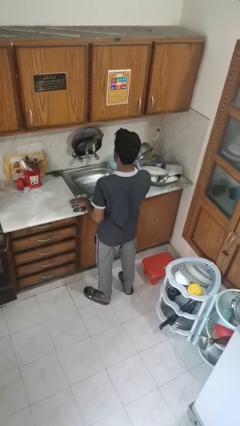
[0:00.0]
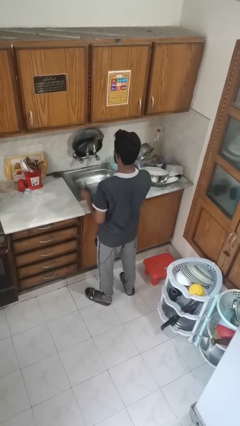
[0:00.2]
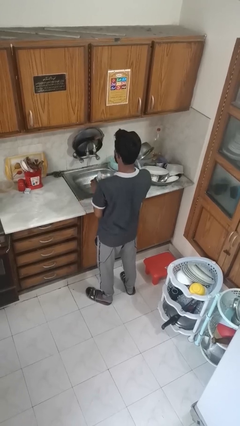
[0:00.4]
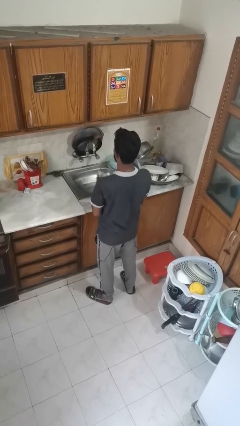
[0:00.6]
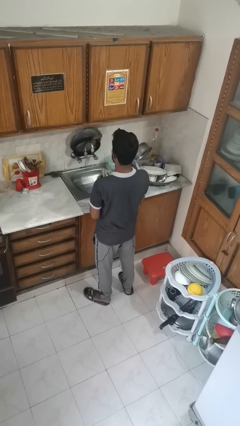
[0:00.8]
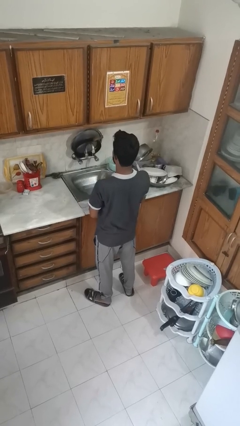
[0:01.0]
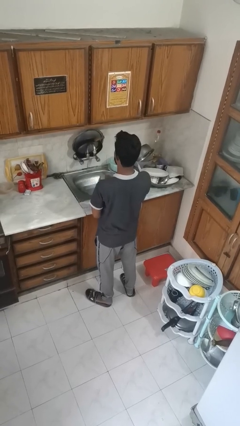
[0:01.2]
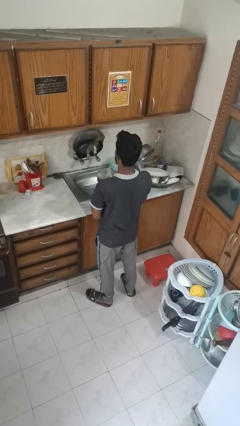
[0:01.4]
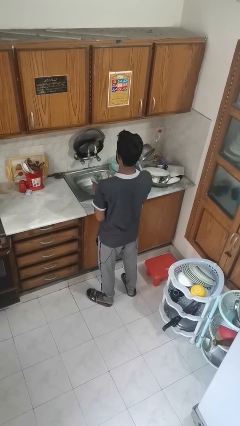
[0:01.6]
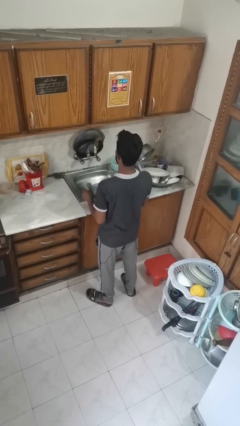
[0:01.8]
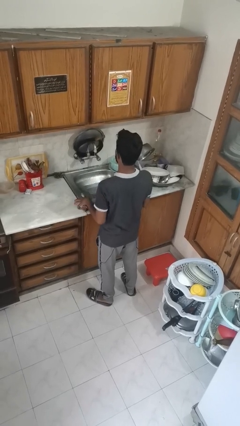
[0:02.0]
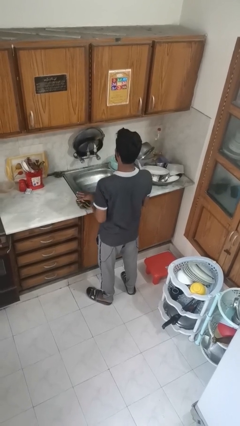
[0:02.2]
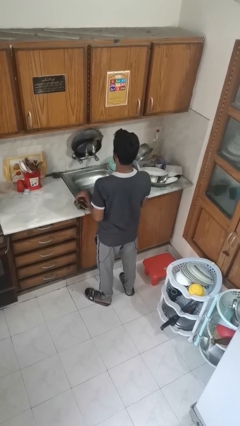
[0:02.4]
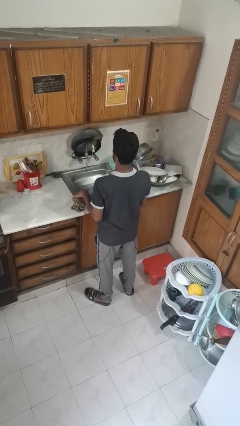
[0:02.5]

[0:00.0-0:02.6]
person dries hands with towel

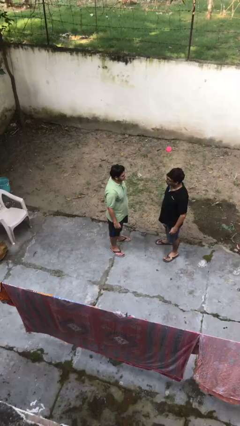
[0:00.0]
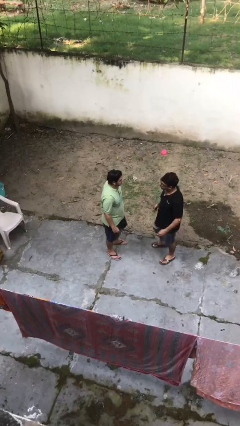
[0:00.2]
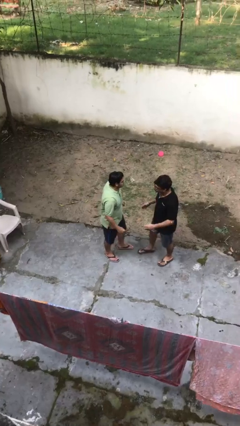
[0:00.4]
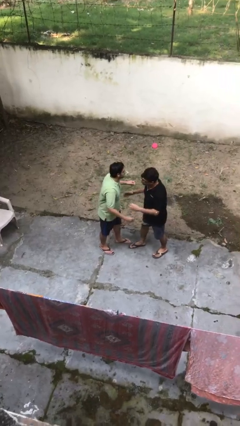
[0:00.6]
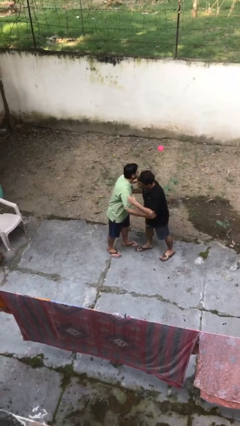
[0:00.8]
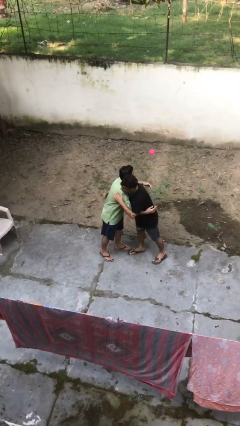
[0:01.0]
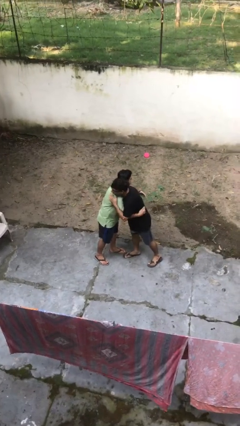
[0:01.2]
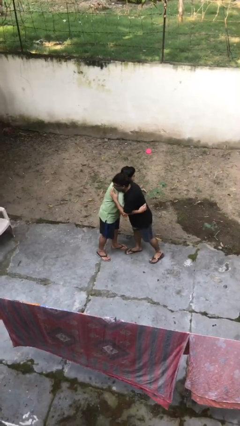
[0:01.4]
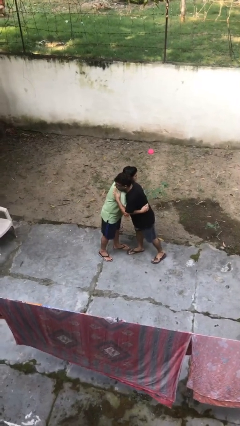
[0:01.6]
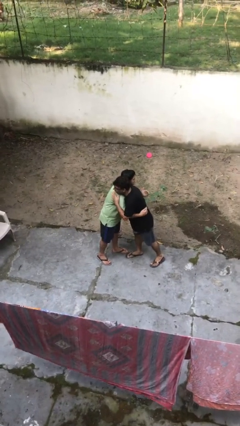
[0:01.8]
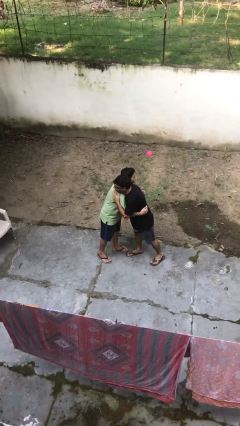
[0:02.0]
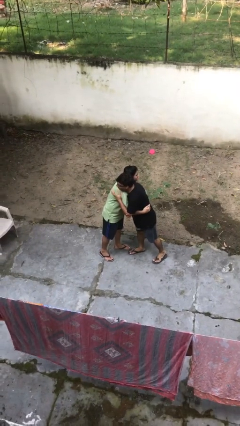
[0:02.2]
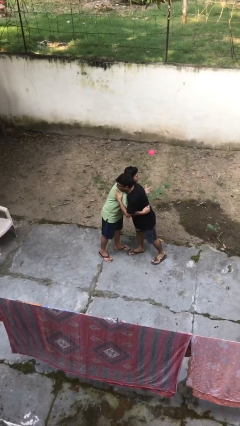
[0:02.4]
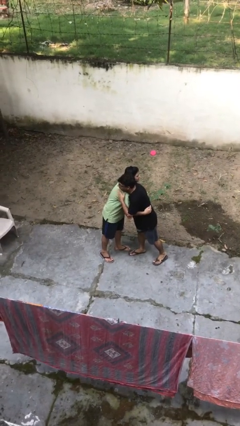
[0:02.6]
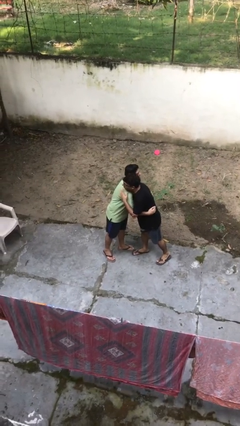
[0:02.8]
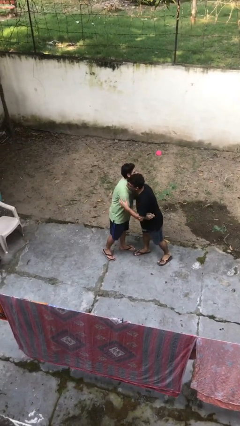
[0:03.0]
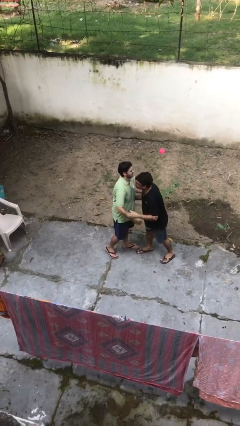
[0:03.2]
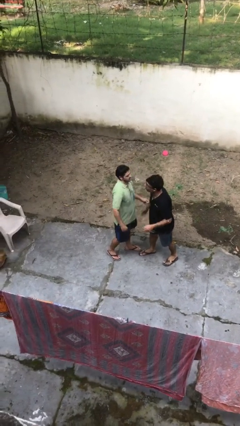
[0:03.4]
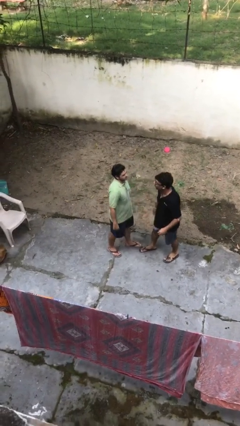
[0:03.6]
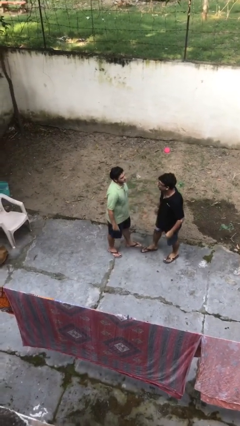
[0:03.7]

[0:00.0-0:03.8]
person embraces person

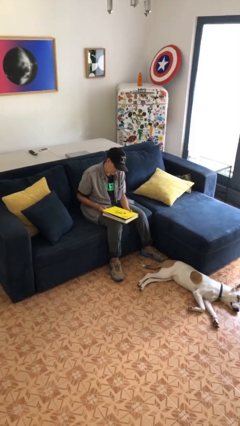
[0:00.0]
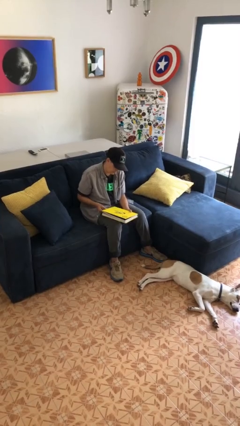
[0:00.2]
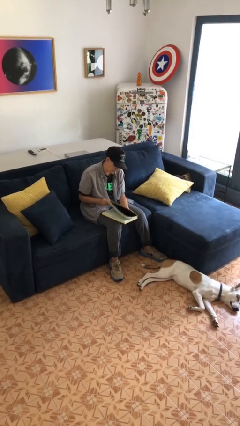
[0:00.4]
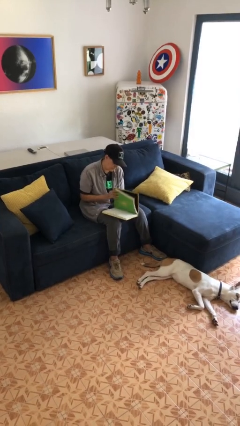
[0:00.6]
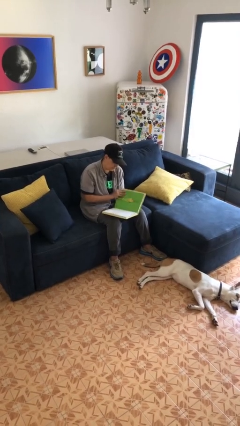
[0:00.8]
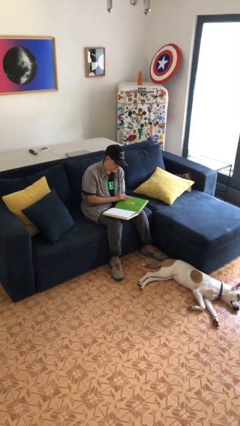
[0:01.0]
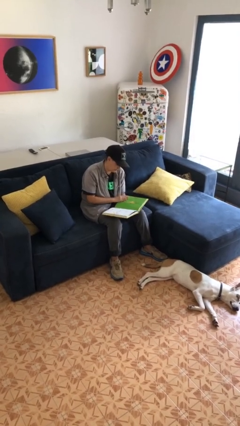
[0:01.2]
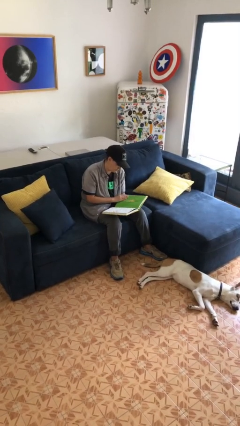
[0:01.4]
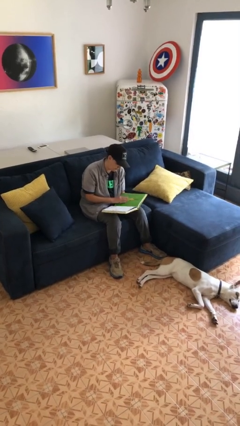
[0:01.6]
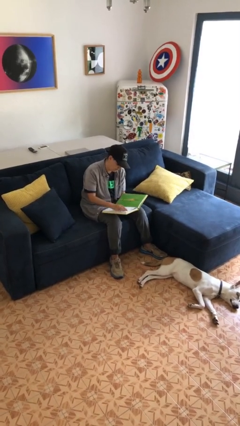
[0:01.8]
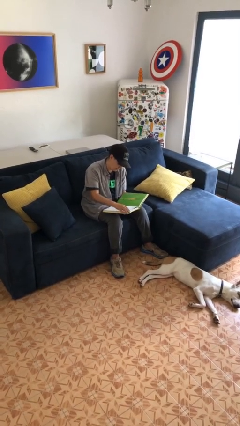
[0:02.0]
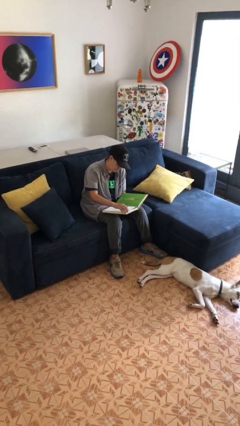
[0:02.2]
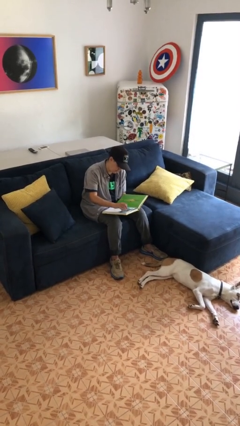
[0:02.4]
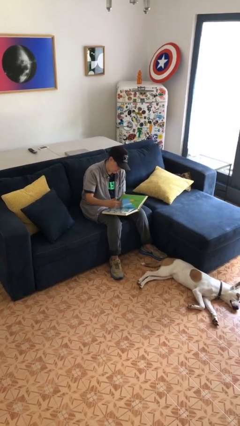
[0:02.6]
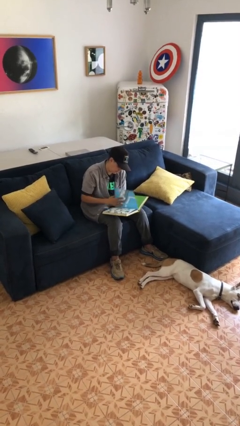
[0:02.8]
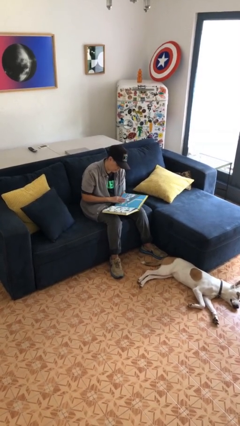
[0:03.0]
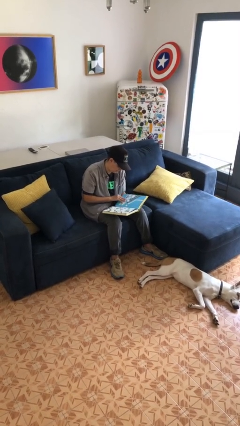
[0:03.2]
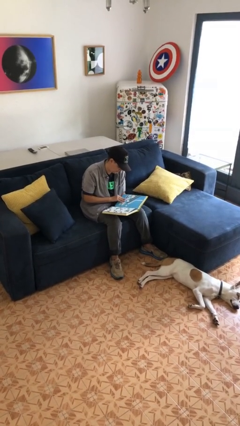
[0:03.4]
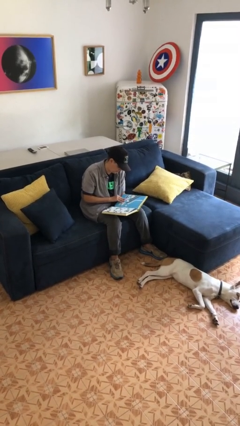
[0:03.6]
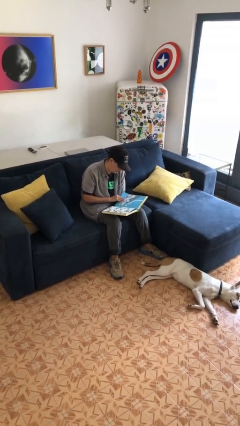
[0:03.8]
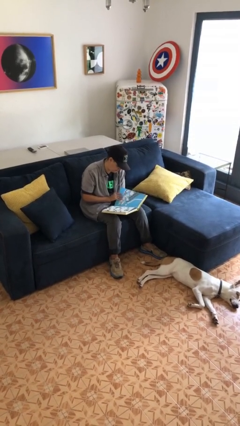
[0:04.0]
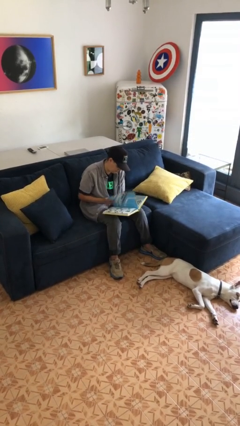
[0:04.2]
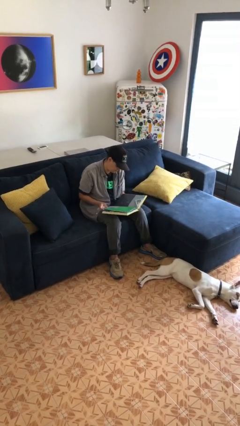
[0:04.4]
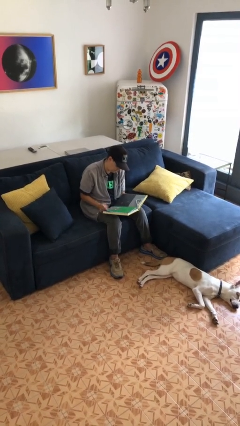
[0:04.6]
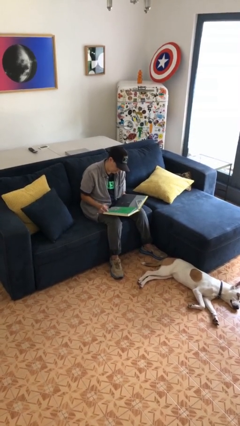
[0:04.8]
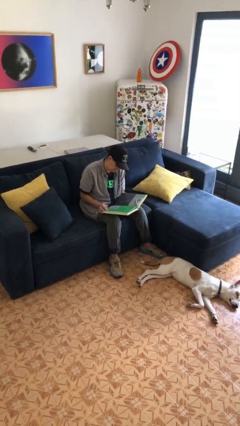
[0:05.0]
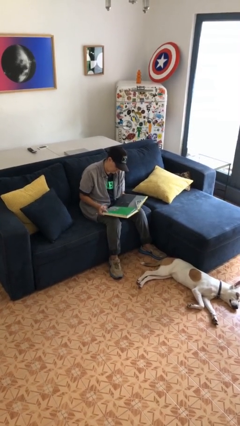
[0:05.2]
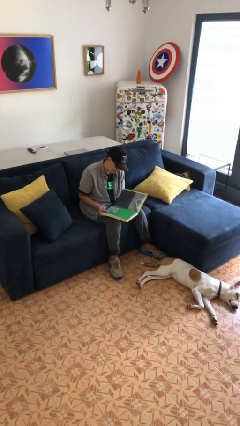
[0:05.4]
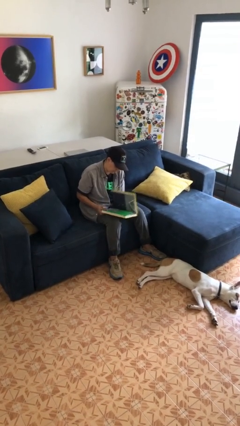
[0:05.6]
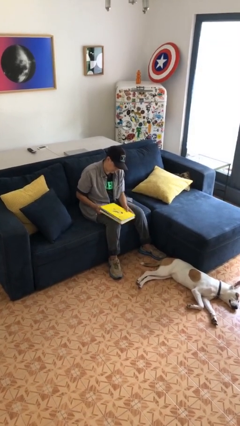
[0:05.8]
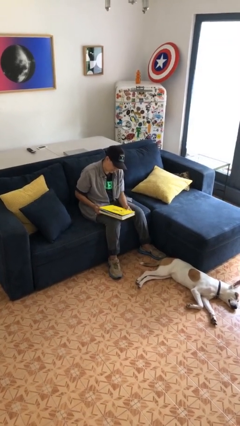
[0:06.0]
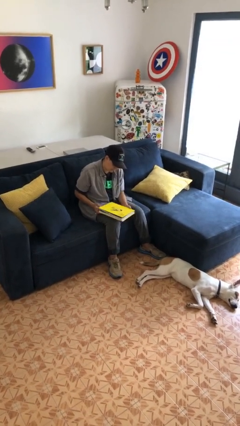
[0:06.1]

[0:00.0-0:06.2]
person reads book

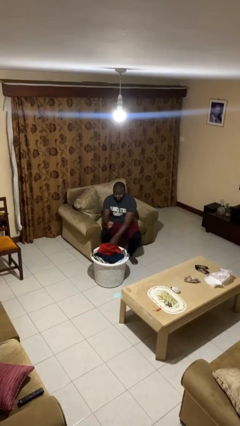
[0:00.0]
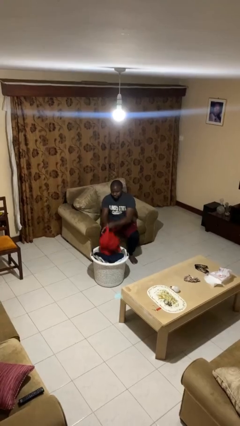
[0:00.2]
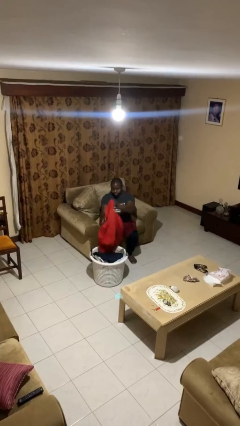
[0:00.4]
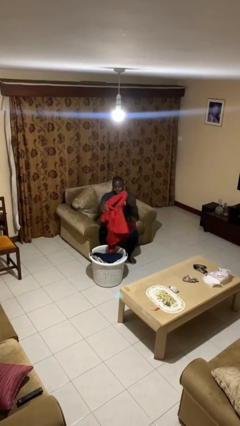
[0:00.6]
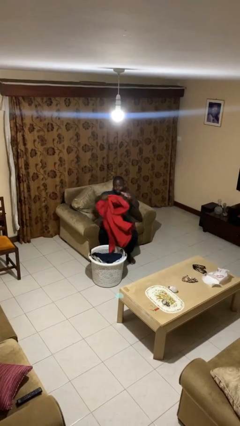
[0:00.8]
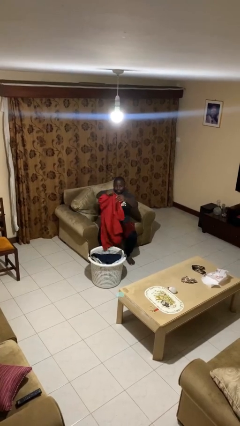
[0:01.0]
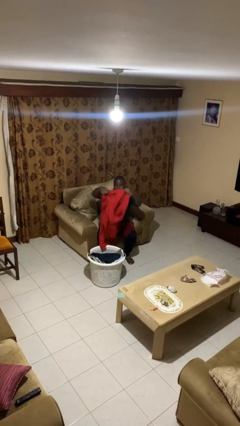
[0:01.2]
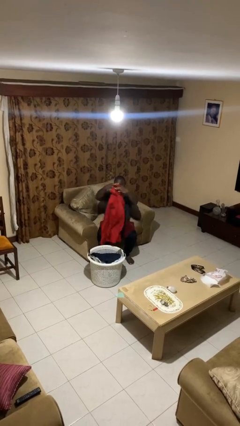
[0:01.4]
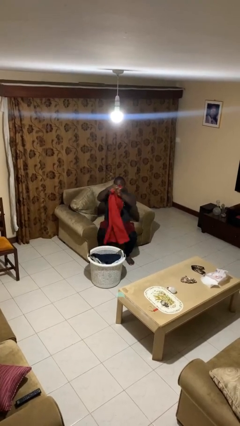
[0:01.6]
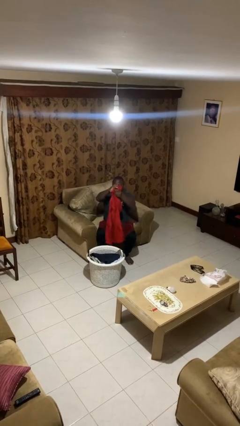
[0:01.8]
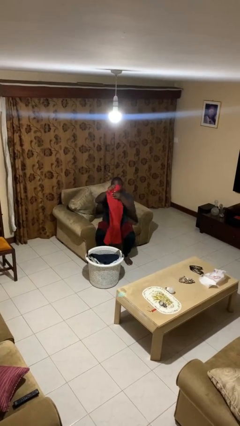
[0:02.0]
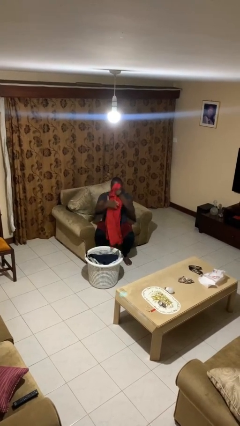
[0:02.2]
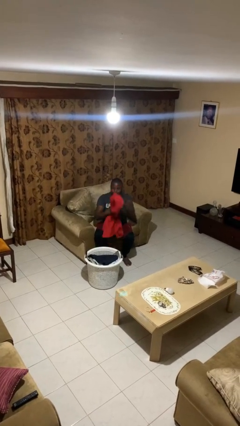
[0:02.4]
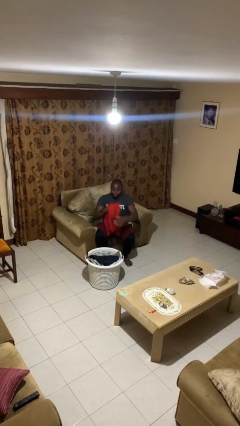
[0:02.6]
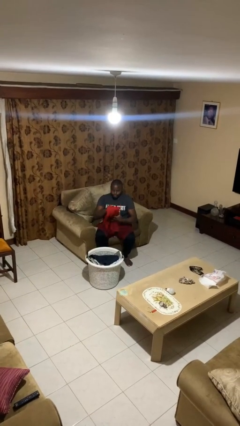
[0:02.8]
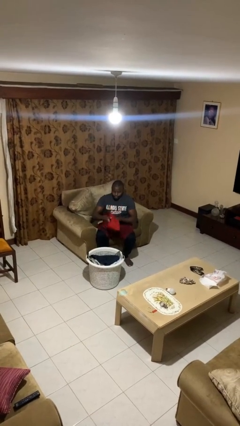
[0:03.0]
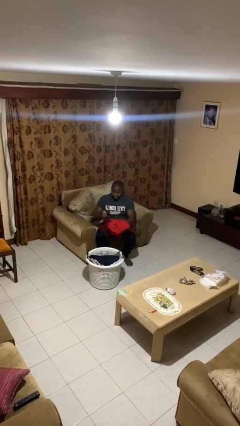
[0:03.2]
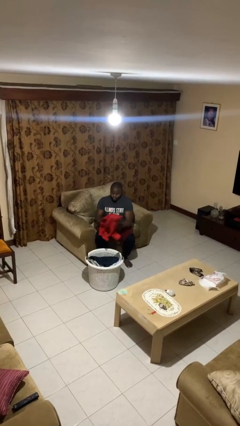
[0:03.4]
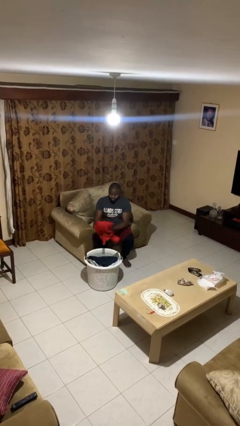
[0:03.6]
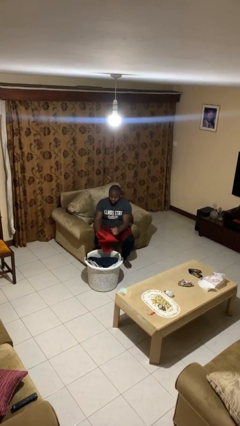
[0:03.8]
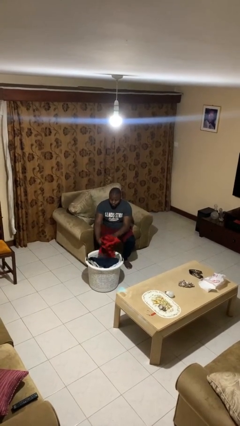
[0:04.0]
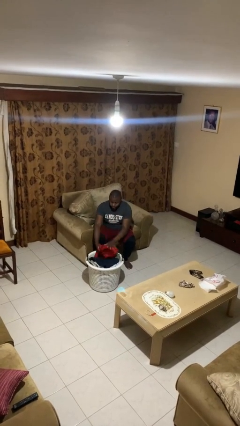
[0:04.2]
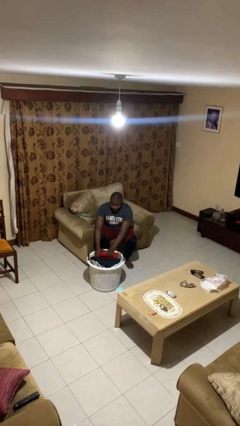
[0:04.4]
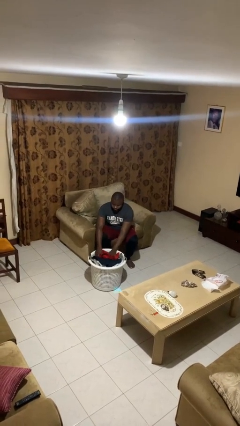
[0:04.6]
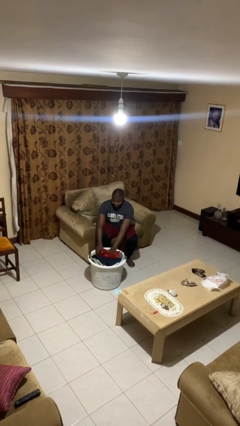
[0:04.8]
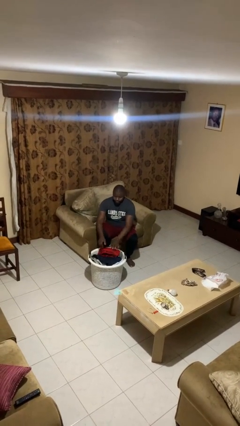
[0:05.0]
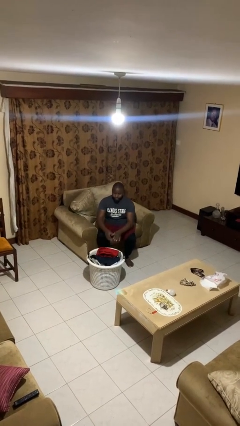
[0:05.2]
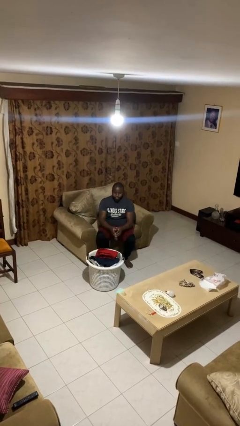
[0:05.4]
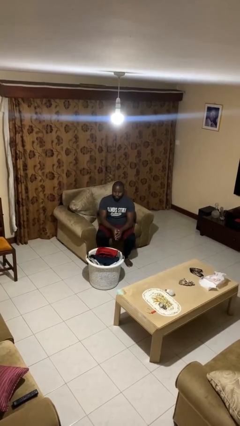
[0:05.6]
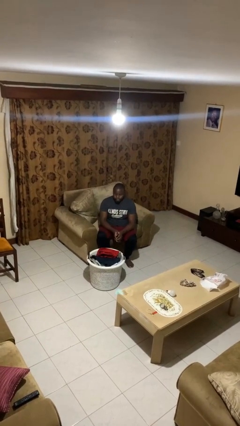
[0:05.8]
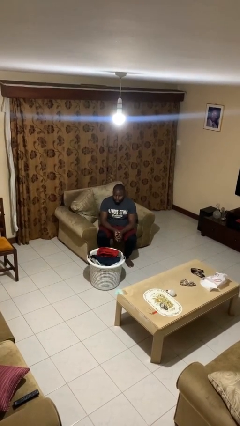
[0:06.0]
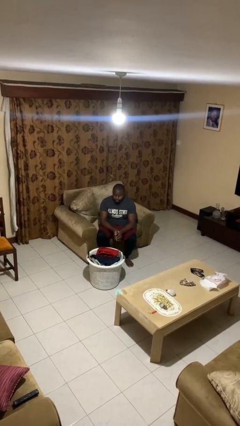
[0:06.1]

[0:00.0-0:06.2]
person folds shirt
